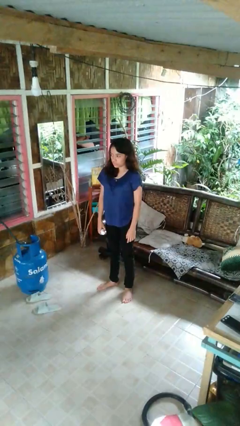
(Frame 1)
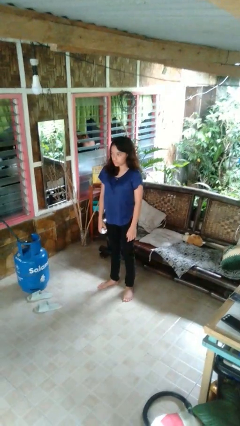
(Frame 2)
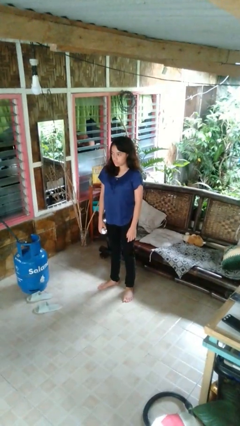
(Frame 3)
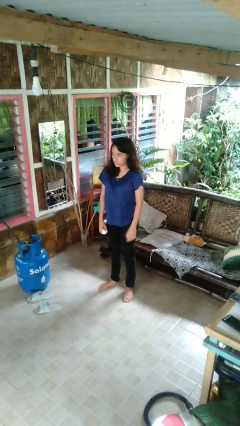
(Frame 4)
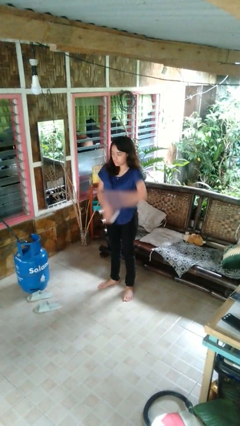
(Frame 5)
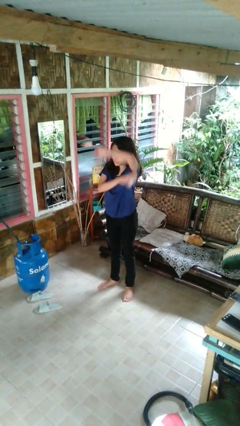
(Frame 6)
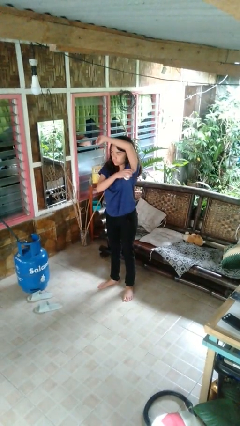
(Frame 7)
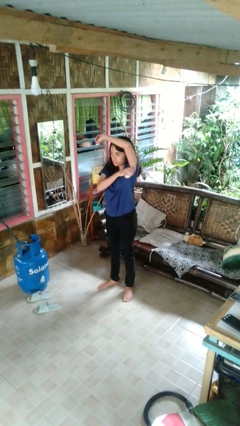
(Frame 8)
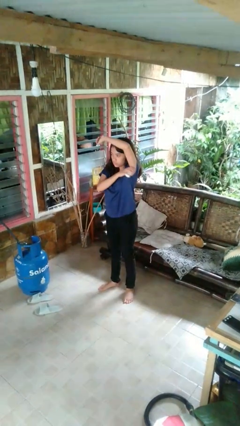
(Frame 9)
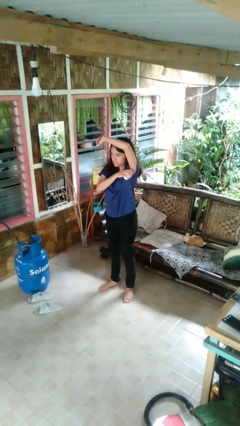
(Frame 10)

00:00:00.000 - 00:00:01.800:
person applies deodorant

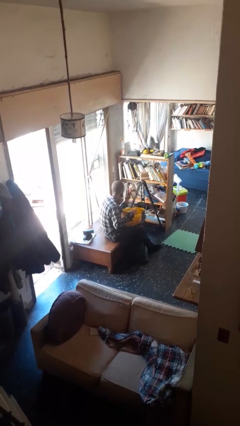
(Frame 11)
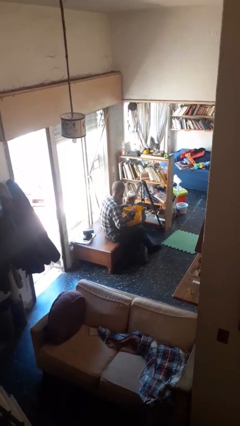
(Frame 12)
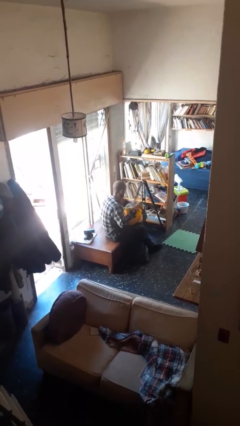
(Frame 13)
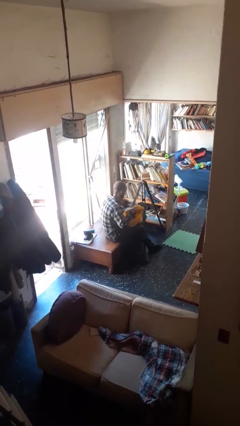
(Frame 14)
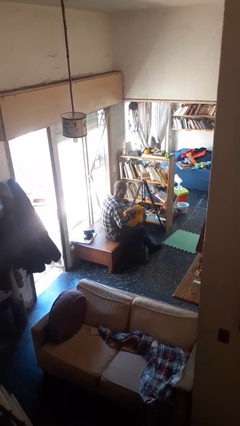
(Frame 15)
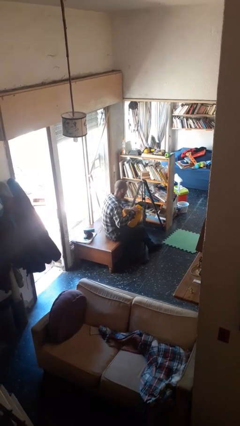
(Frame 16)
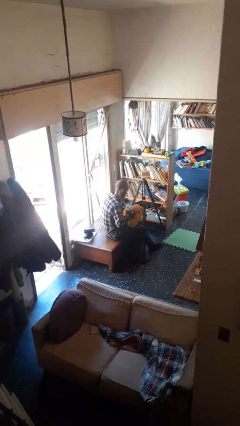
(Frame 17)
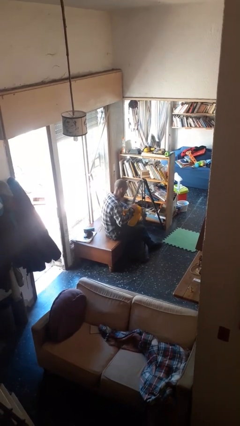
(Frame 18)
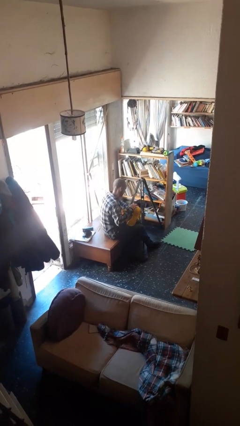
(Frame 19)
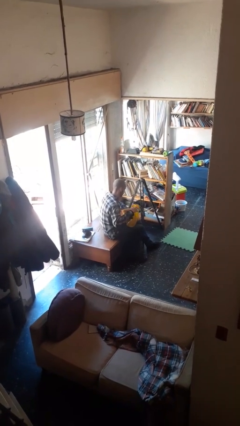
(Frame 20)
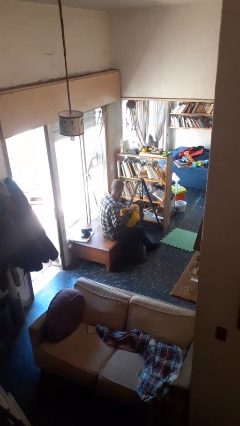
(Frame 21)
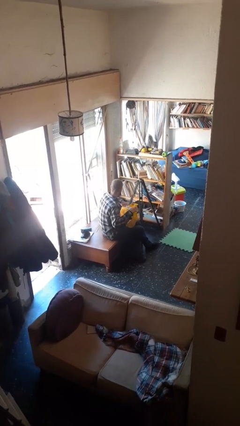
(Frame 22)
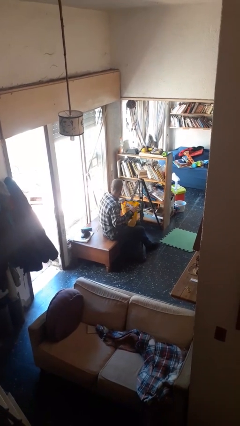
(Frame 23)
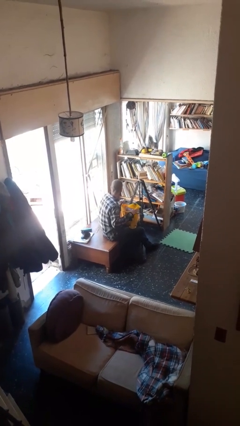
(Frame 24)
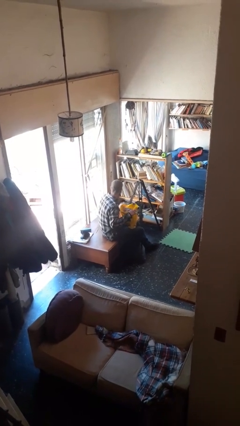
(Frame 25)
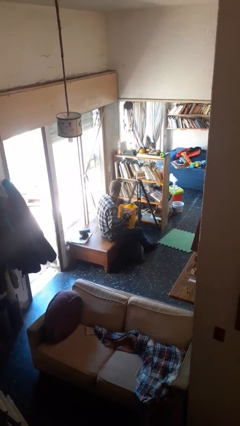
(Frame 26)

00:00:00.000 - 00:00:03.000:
person puts object into bag

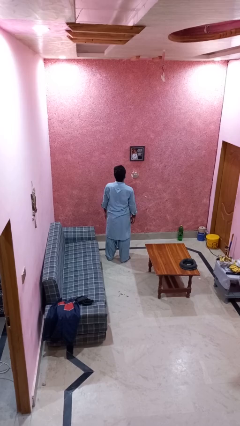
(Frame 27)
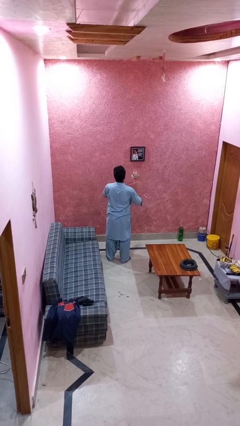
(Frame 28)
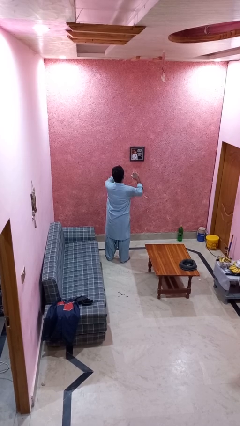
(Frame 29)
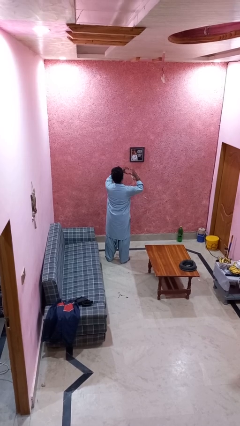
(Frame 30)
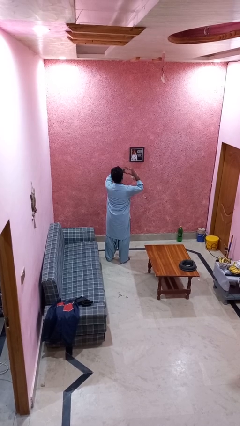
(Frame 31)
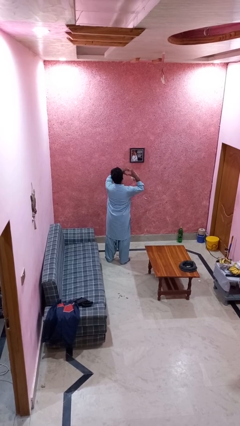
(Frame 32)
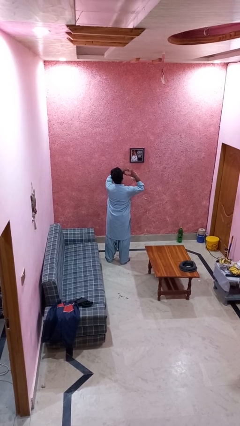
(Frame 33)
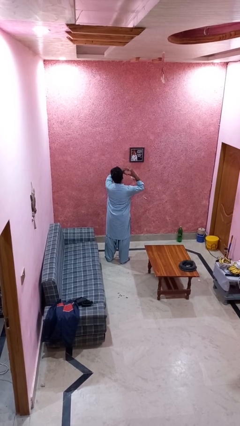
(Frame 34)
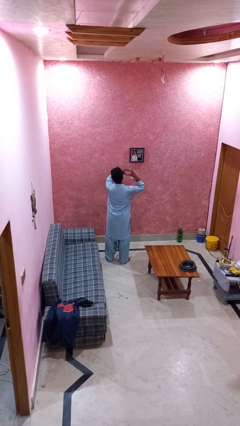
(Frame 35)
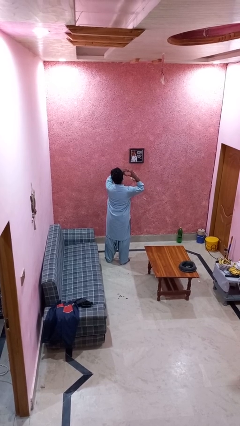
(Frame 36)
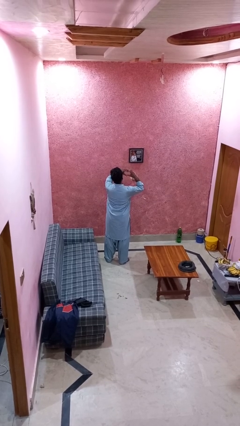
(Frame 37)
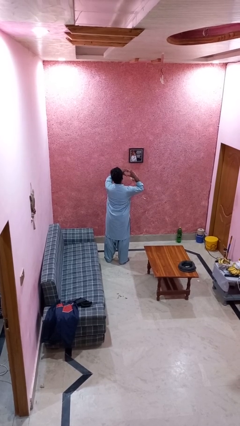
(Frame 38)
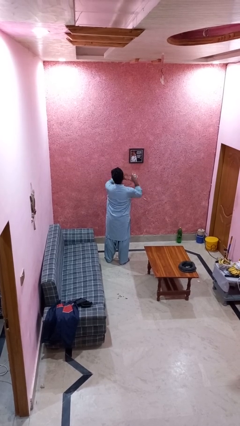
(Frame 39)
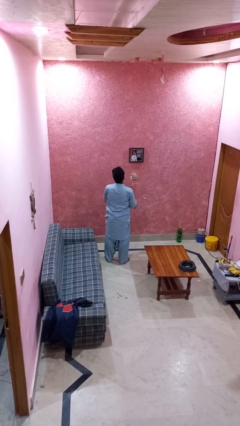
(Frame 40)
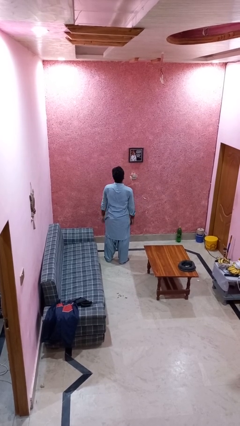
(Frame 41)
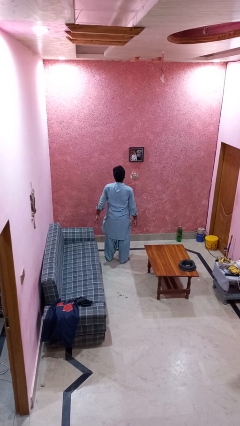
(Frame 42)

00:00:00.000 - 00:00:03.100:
person gestures heart

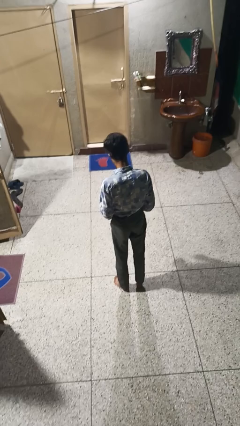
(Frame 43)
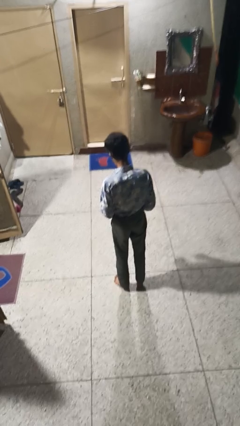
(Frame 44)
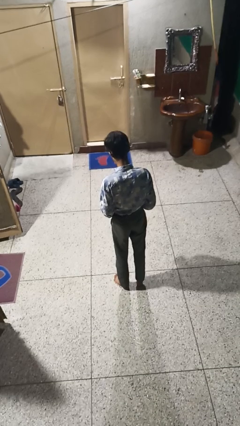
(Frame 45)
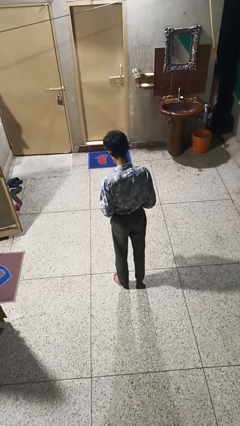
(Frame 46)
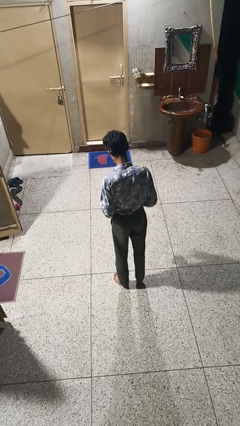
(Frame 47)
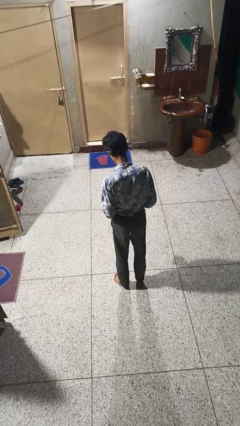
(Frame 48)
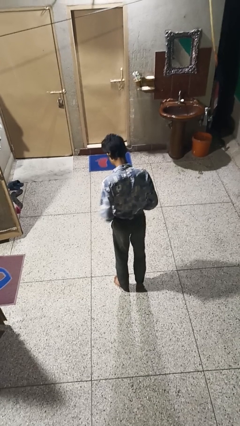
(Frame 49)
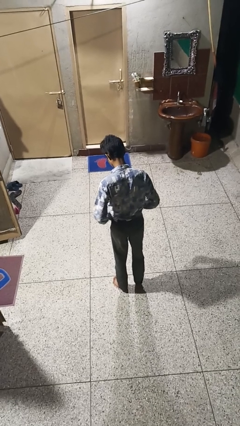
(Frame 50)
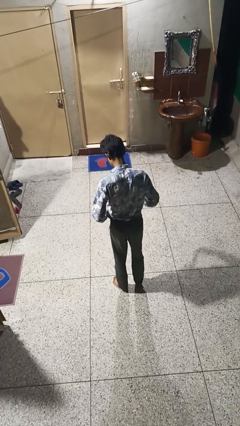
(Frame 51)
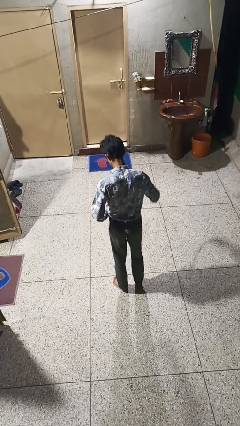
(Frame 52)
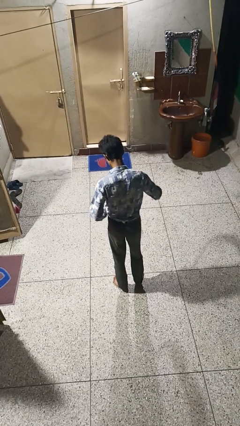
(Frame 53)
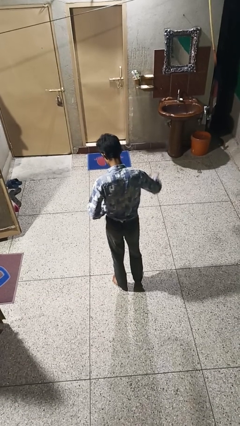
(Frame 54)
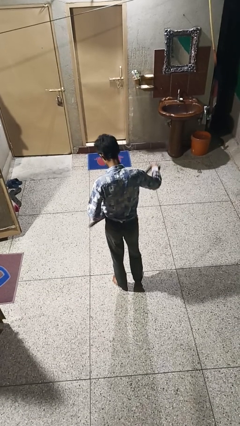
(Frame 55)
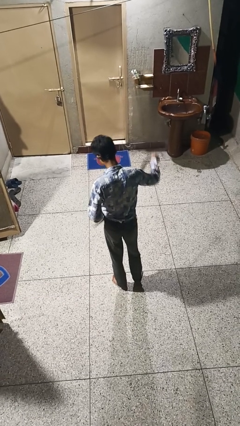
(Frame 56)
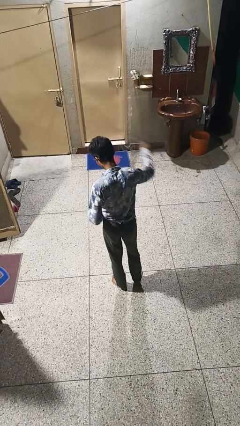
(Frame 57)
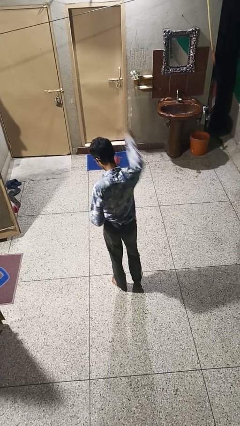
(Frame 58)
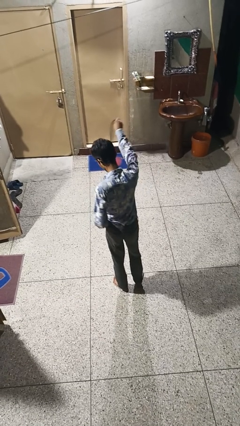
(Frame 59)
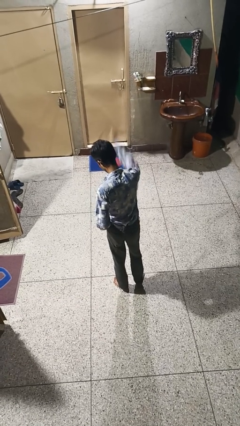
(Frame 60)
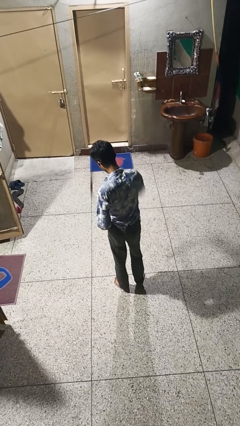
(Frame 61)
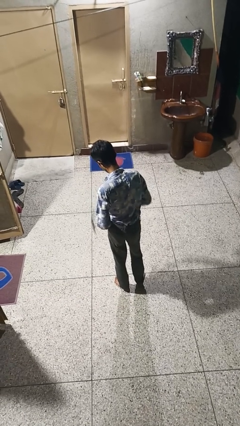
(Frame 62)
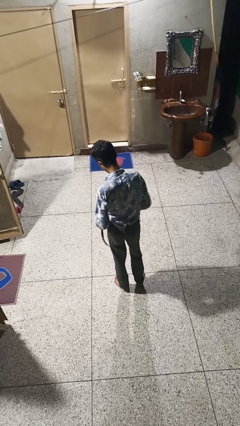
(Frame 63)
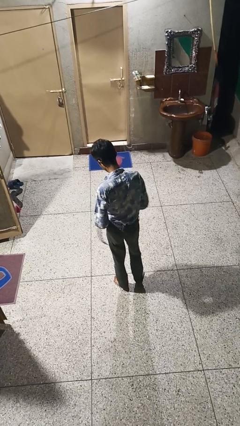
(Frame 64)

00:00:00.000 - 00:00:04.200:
person takes off belt

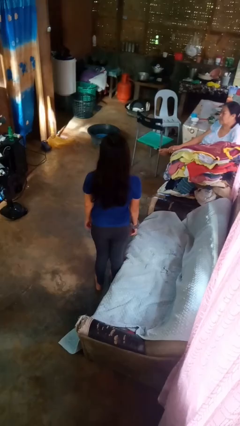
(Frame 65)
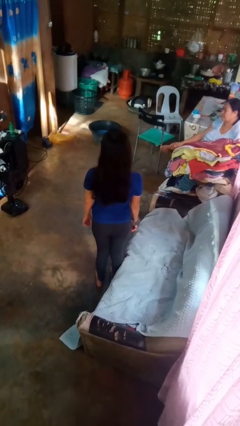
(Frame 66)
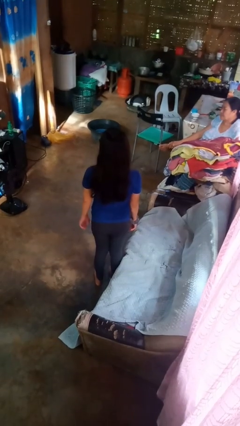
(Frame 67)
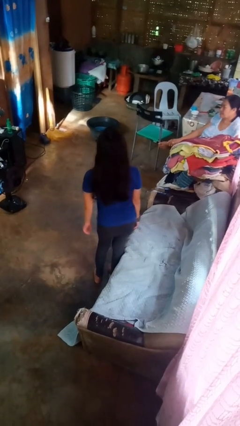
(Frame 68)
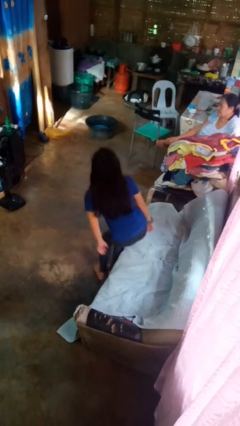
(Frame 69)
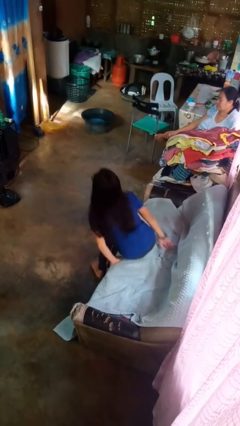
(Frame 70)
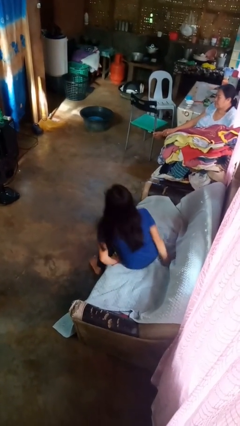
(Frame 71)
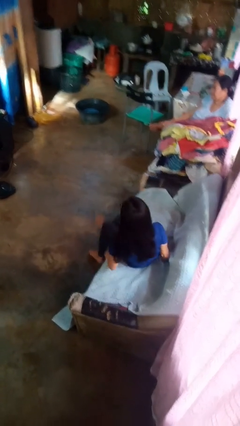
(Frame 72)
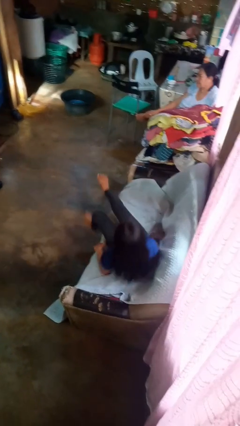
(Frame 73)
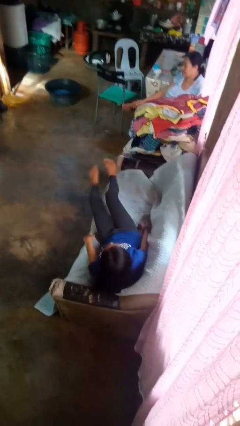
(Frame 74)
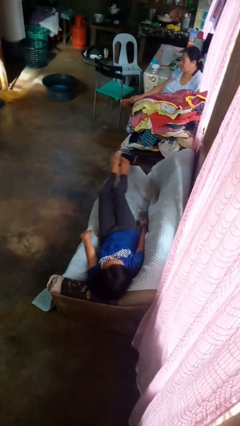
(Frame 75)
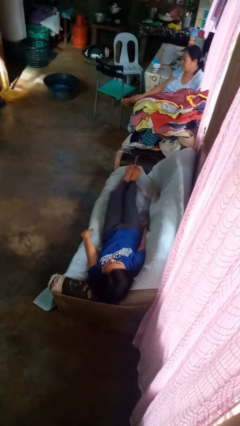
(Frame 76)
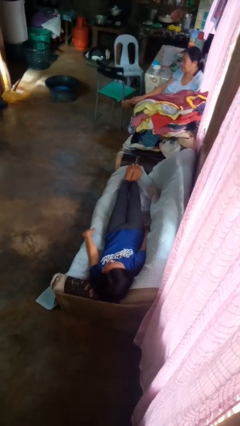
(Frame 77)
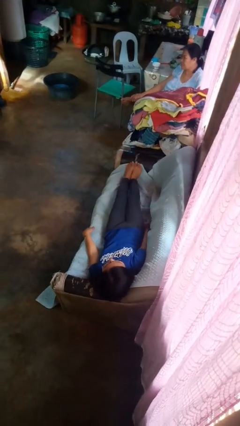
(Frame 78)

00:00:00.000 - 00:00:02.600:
person lies down on couch

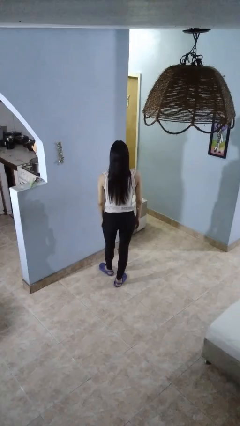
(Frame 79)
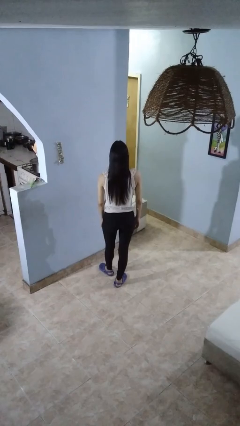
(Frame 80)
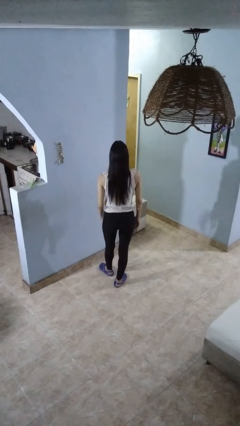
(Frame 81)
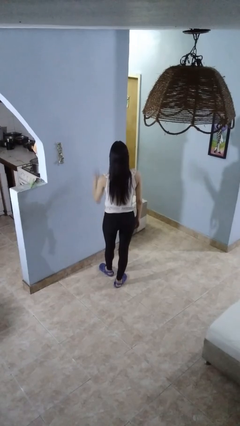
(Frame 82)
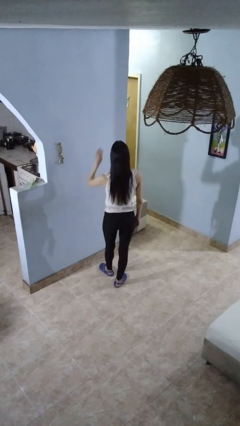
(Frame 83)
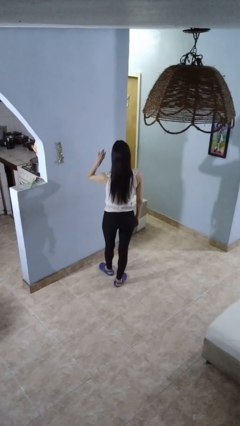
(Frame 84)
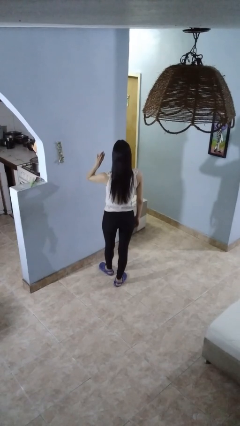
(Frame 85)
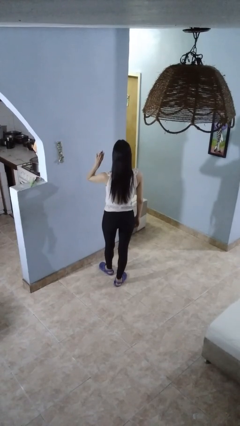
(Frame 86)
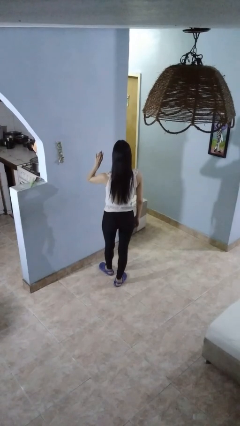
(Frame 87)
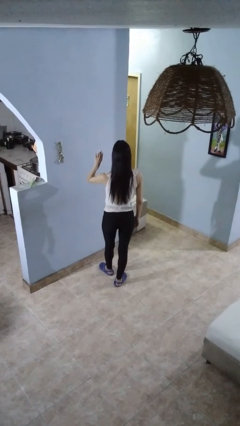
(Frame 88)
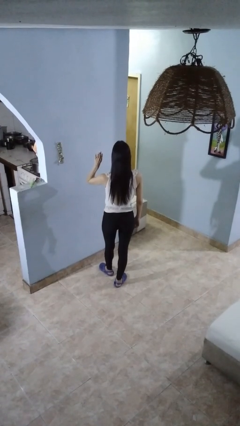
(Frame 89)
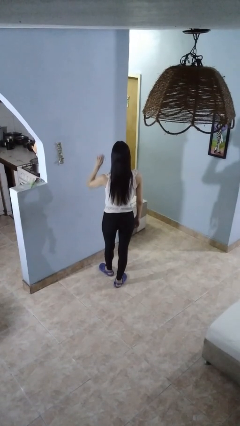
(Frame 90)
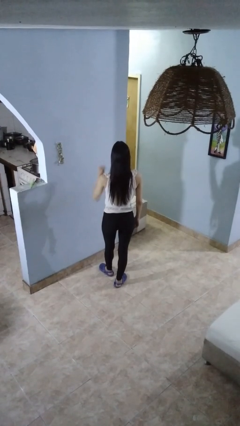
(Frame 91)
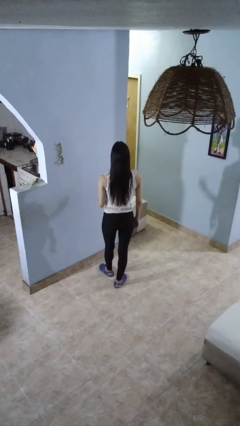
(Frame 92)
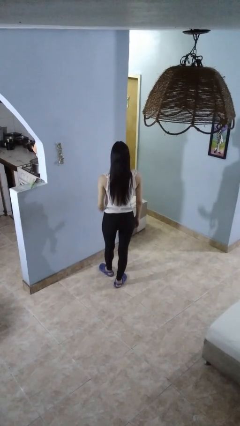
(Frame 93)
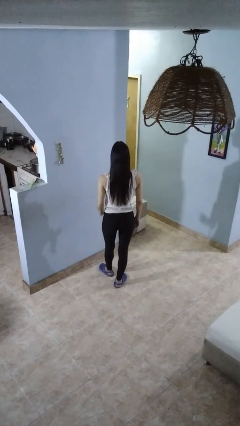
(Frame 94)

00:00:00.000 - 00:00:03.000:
person gestures number four
